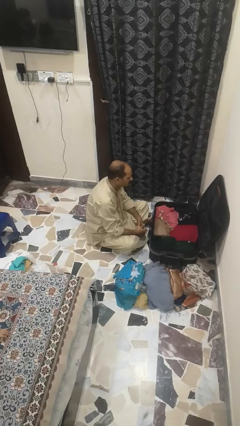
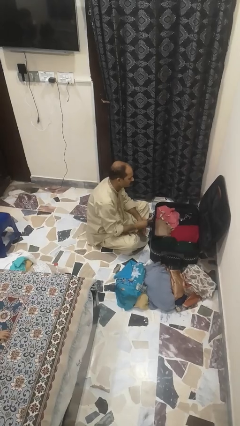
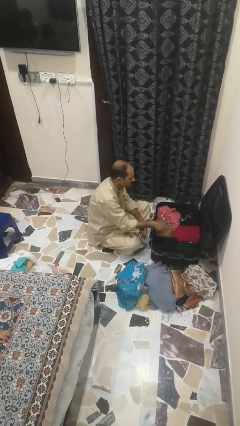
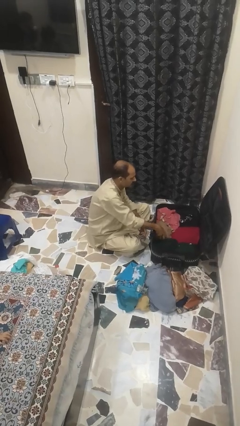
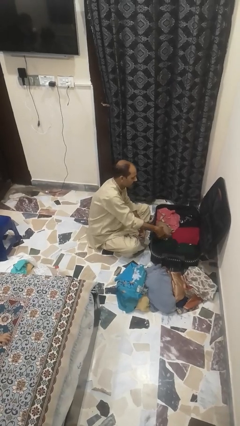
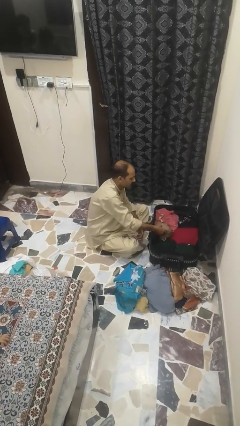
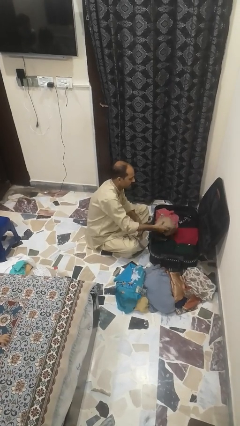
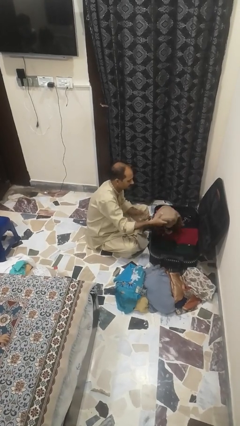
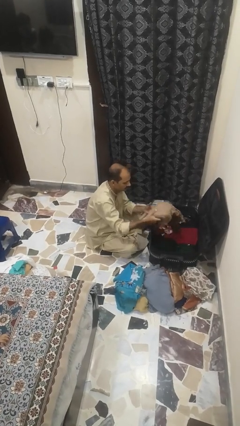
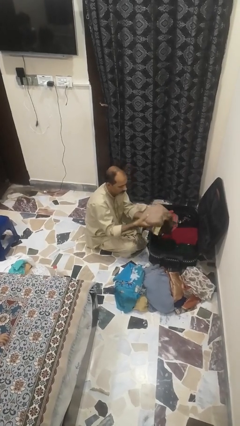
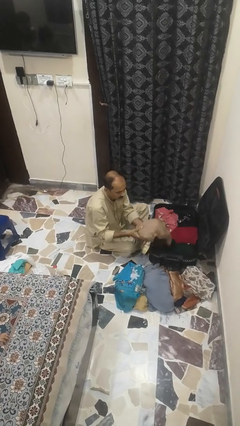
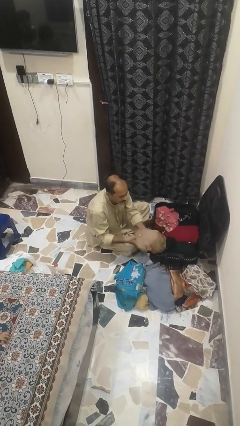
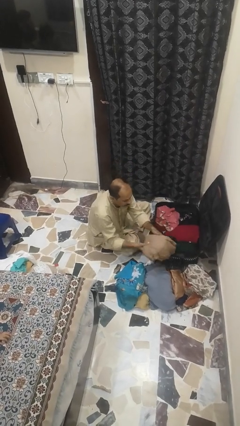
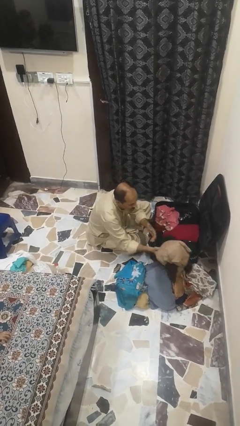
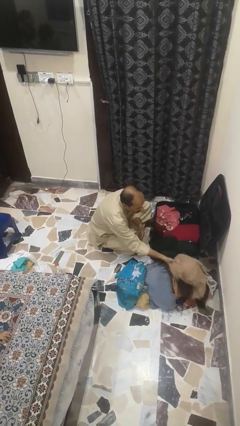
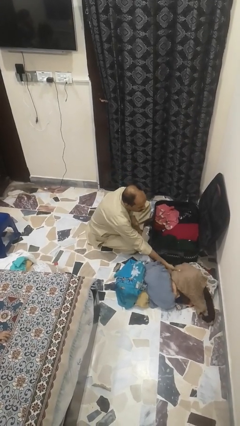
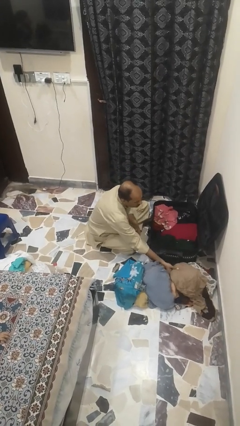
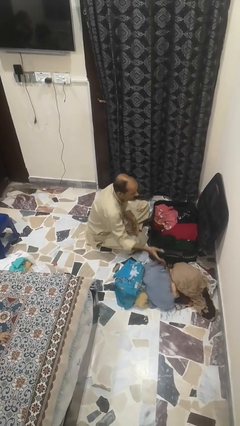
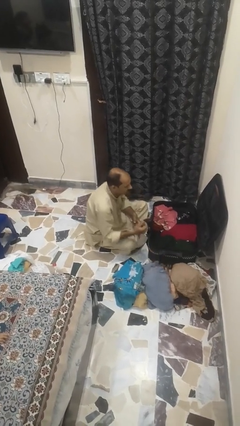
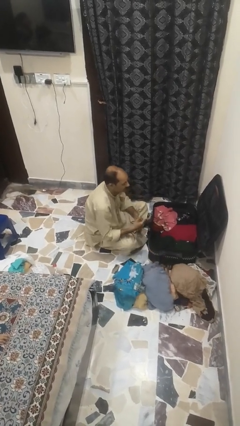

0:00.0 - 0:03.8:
person unloads clothes from suitcase

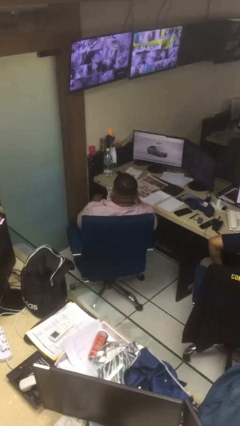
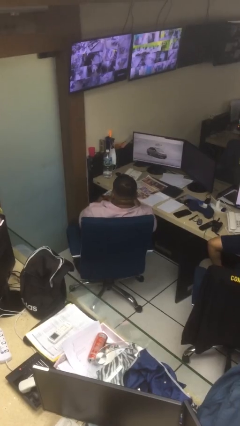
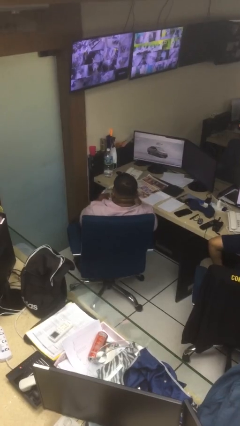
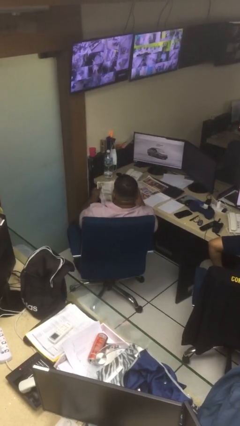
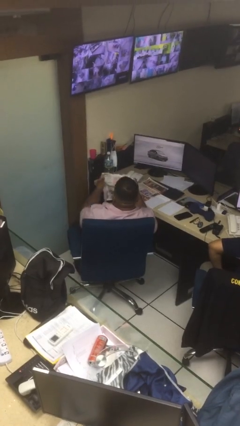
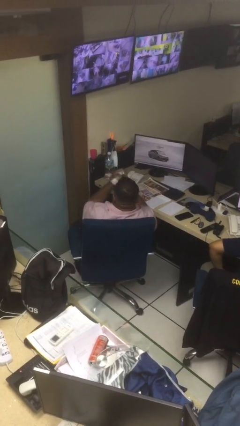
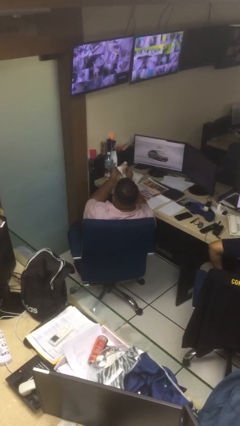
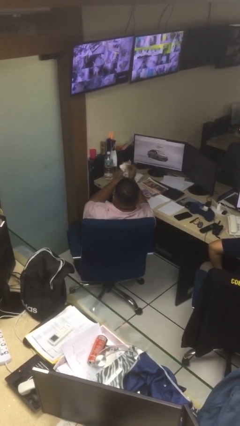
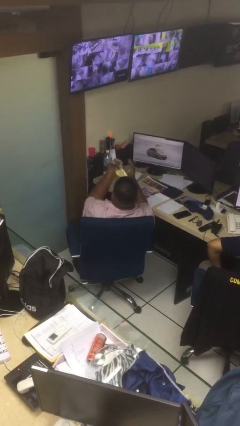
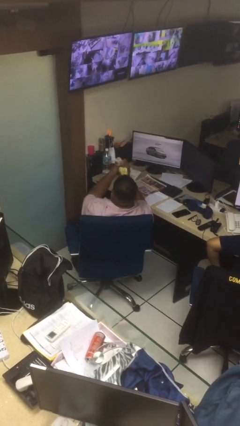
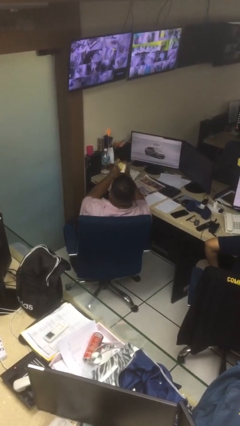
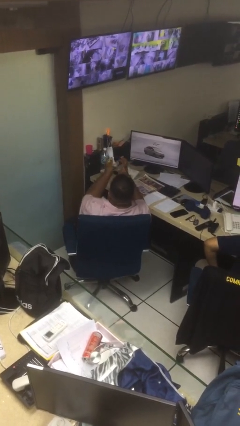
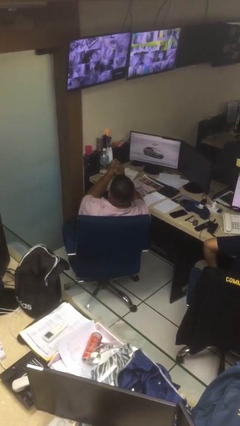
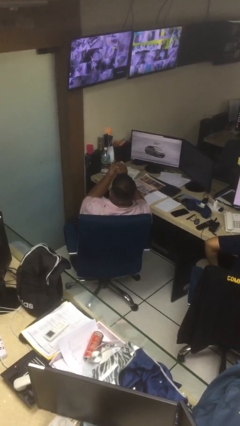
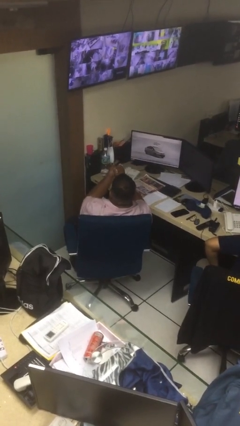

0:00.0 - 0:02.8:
person crumples paper

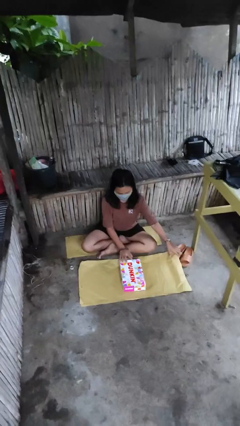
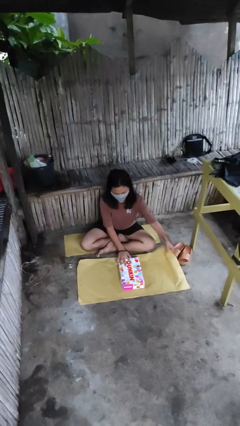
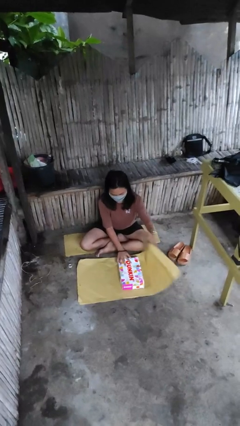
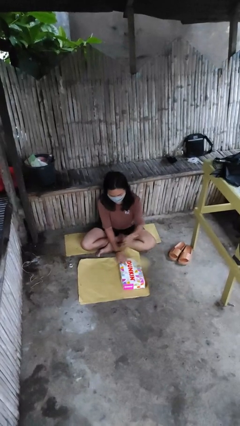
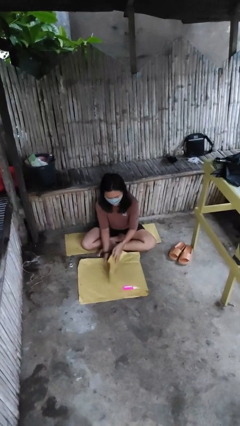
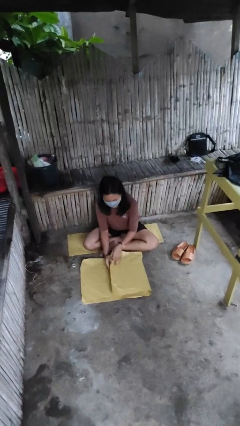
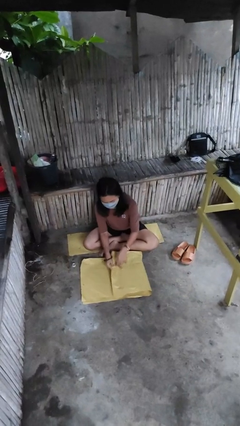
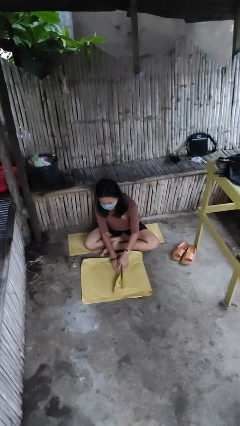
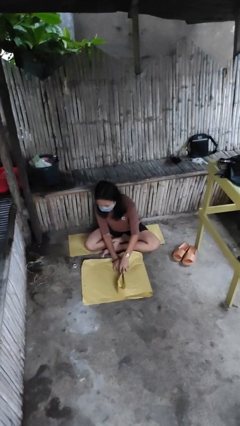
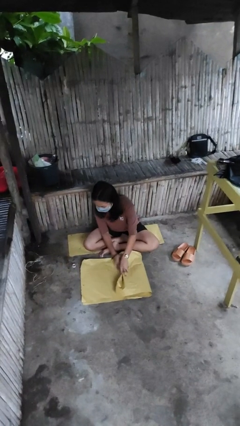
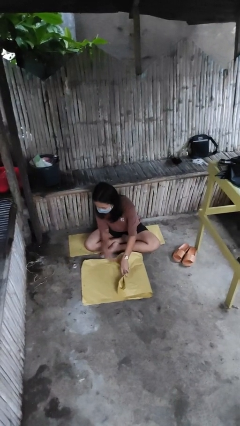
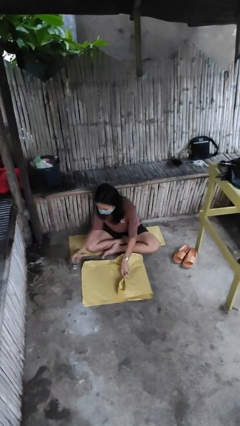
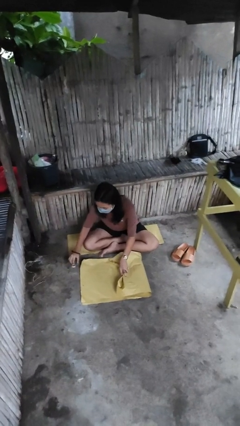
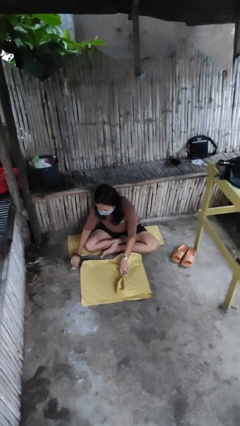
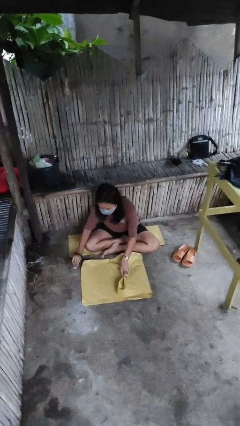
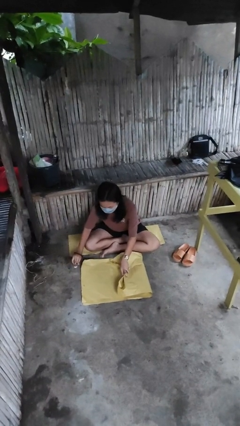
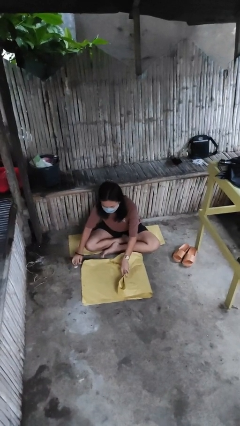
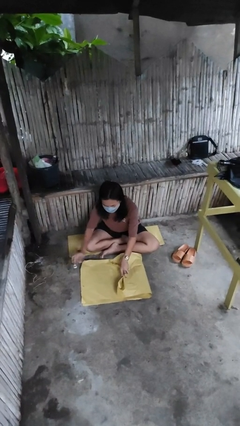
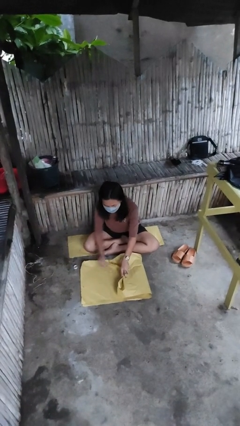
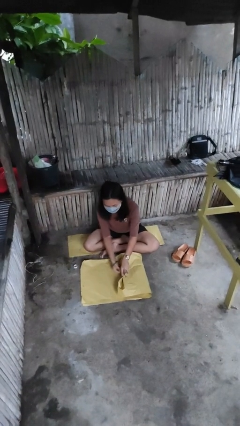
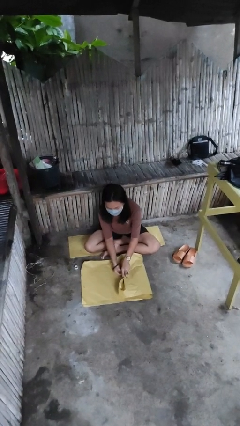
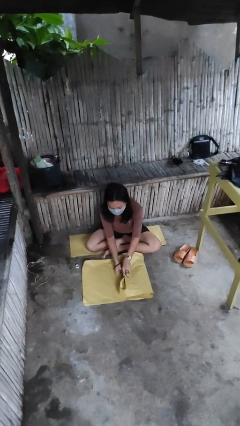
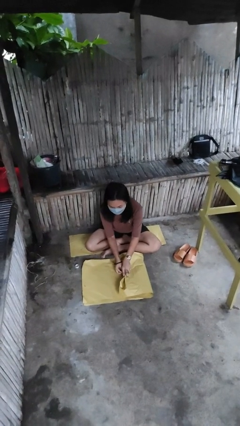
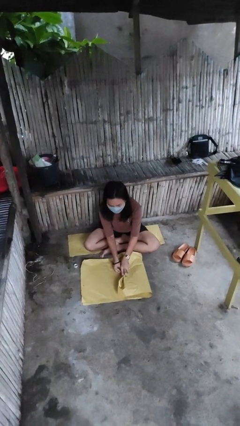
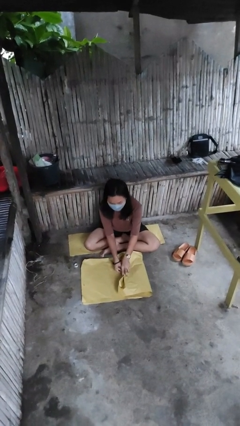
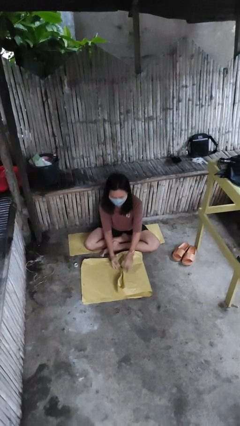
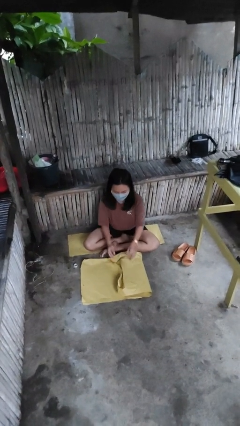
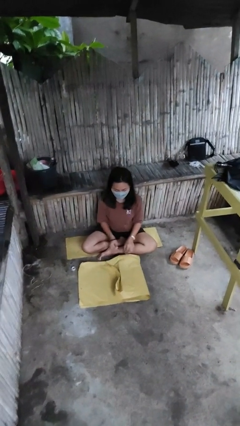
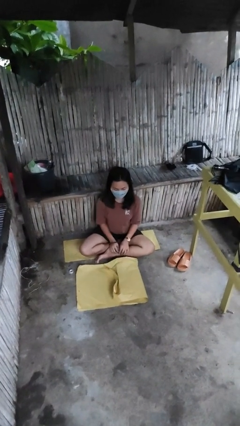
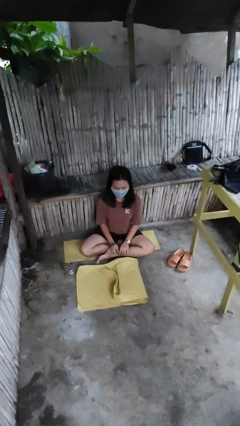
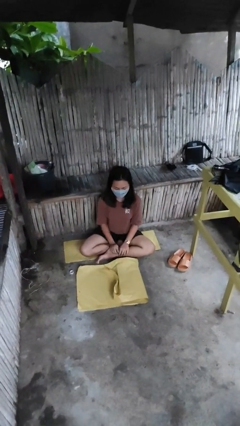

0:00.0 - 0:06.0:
person wraps box

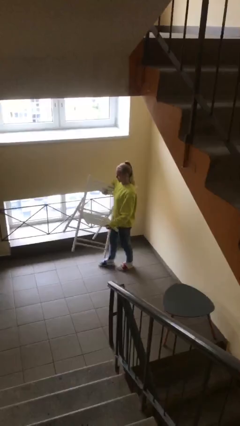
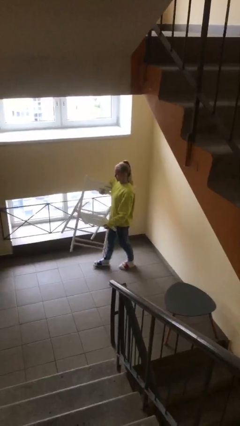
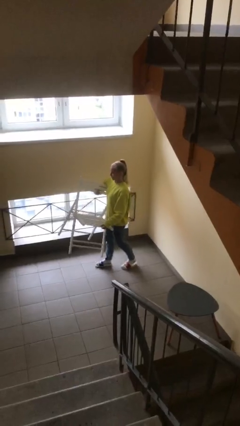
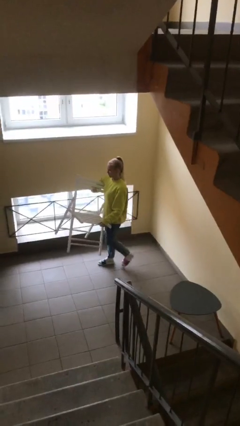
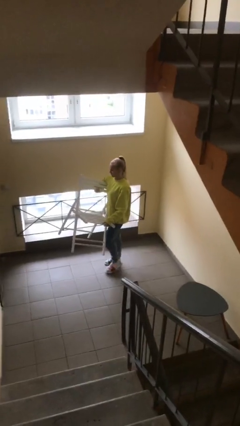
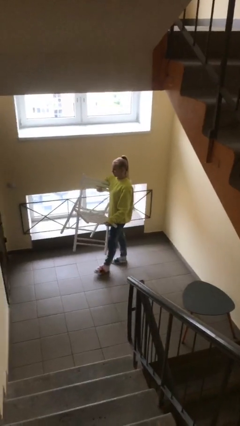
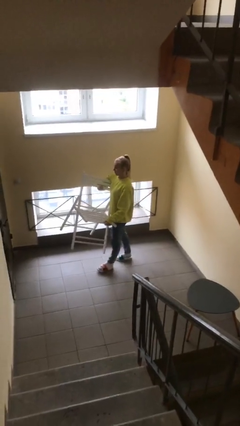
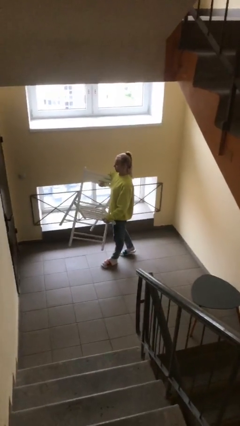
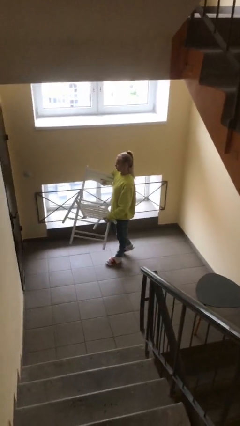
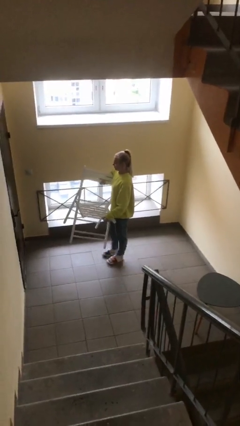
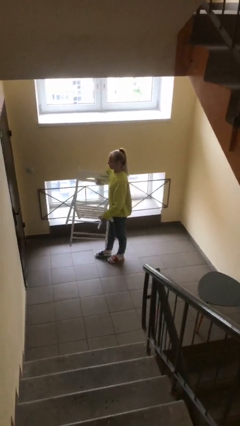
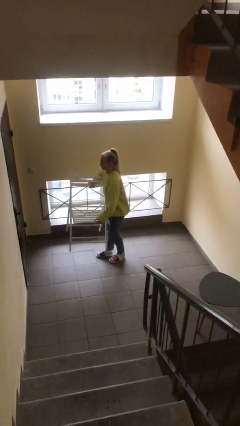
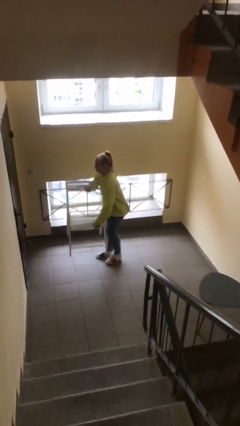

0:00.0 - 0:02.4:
person carries heavy object

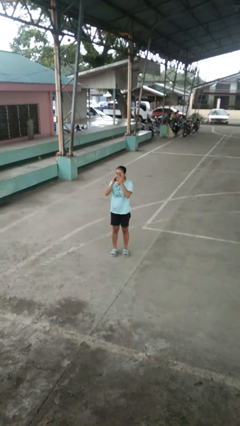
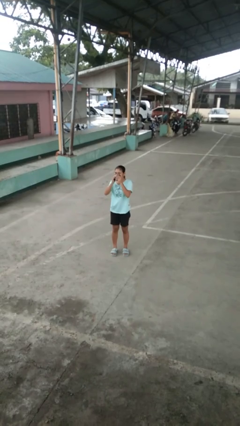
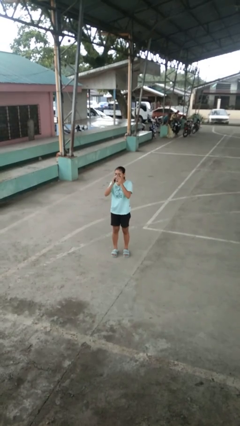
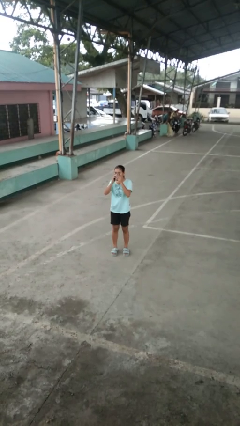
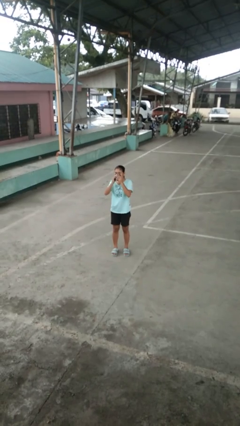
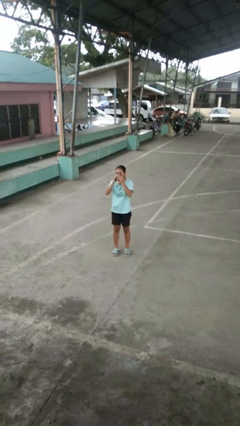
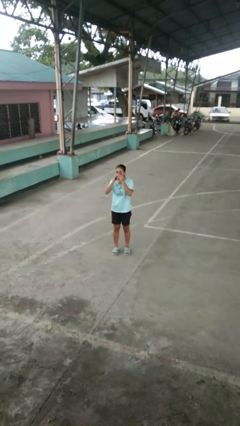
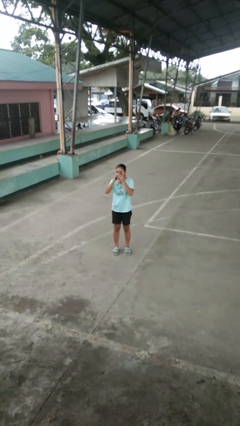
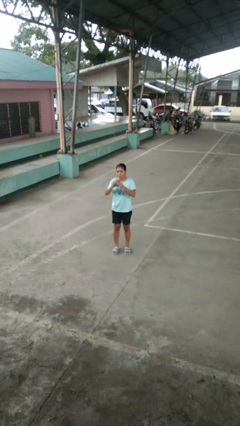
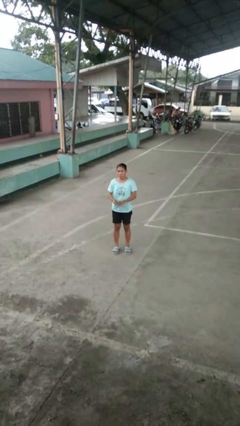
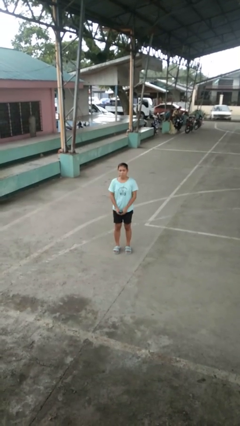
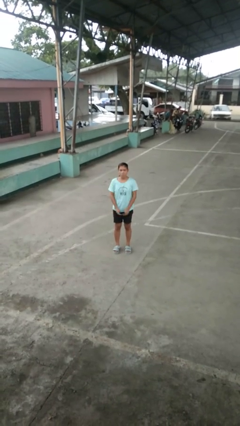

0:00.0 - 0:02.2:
person blows nose
